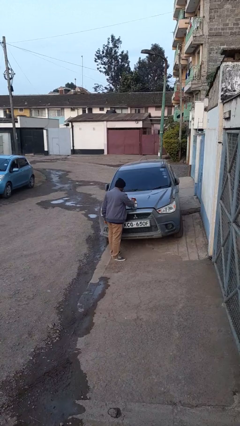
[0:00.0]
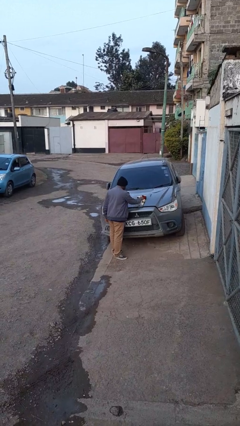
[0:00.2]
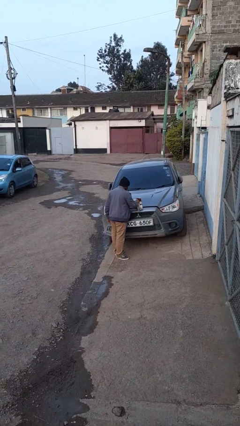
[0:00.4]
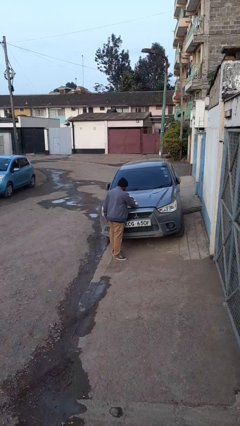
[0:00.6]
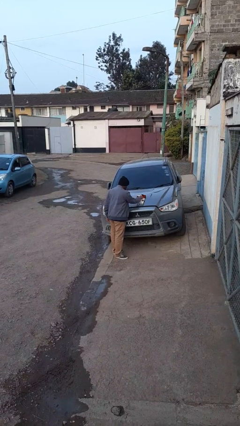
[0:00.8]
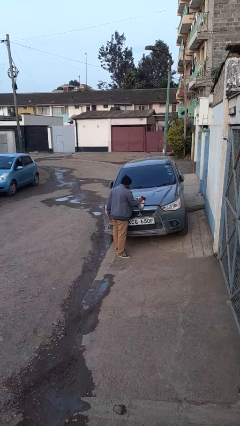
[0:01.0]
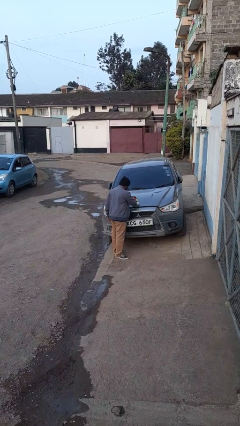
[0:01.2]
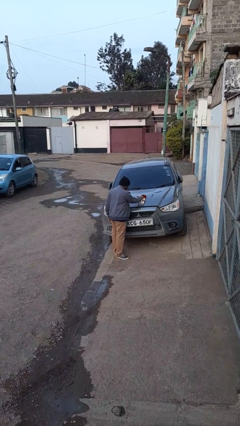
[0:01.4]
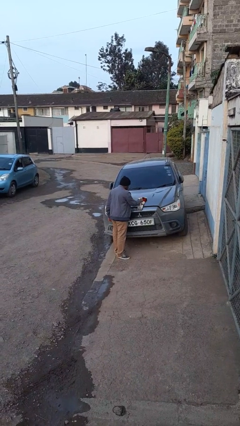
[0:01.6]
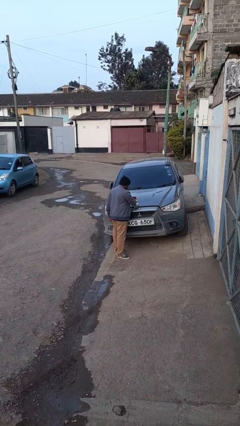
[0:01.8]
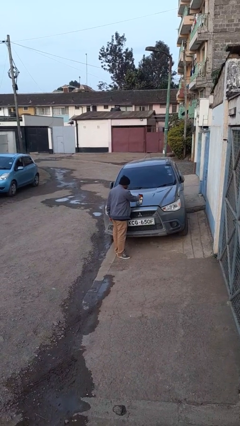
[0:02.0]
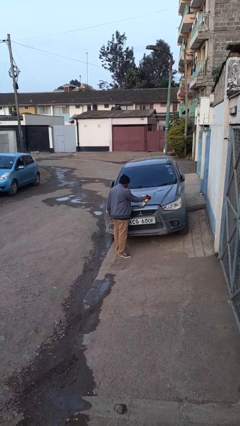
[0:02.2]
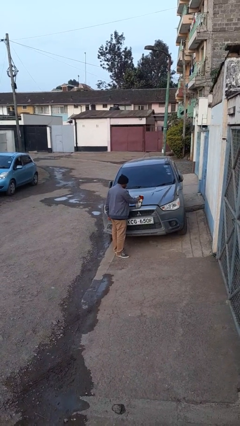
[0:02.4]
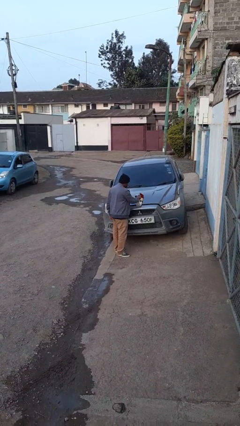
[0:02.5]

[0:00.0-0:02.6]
person polishes car with rag

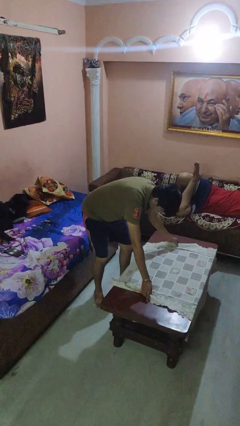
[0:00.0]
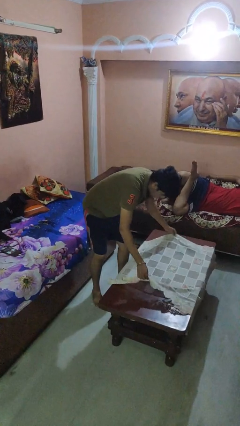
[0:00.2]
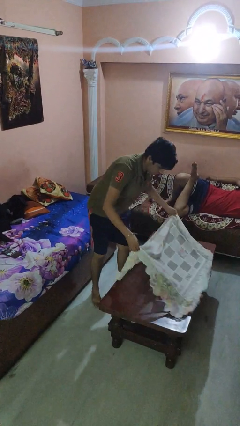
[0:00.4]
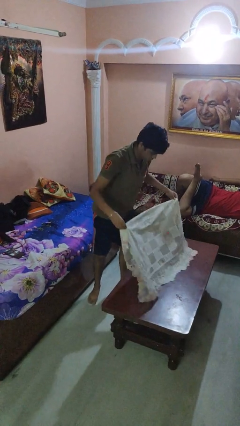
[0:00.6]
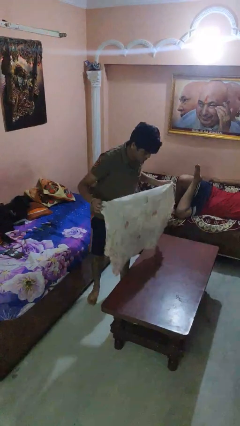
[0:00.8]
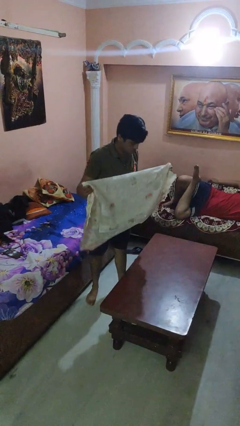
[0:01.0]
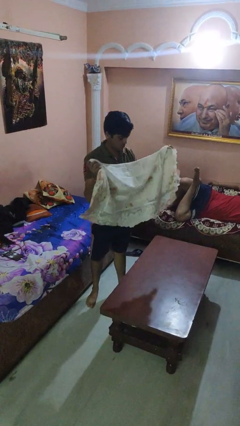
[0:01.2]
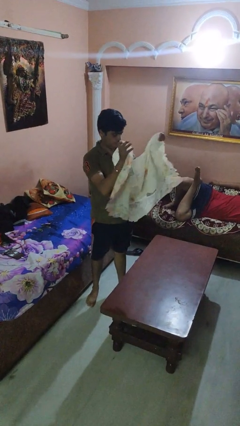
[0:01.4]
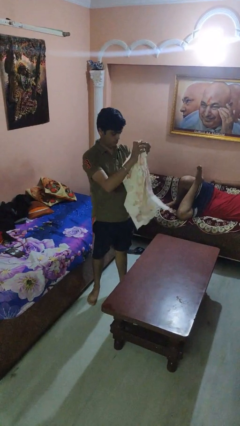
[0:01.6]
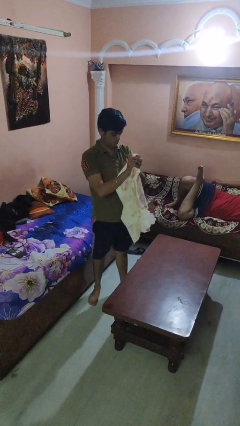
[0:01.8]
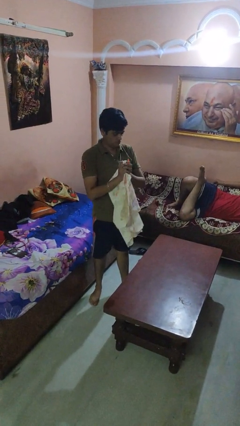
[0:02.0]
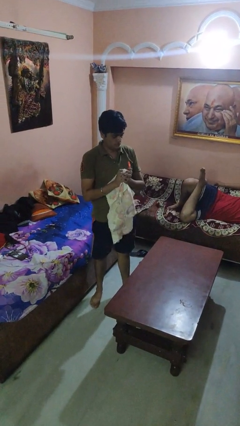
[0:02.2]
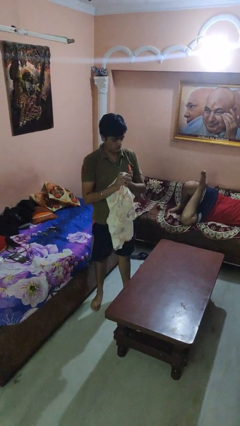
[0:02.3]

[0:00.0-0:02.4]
person folds tablecloth

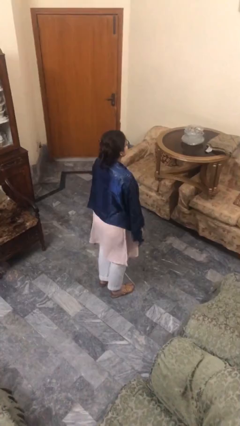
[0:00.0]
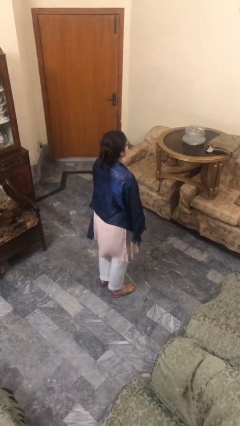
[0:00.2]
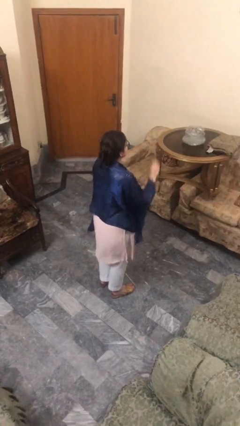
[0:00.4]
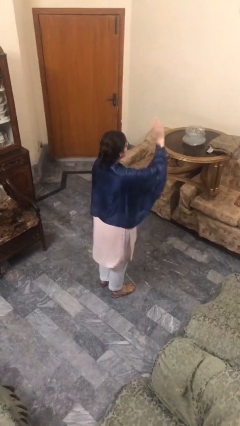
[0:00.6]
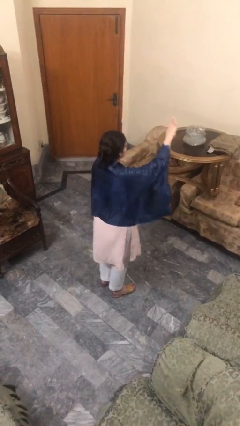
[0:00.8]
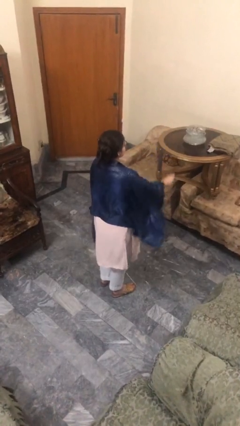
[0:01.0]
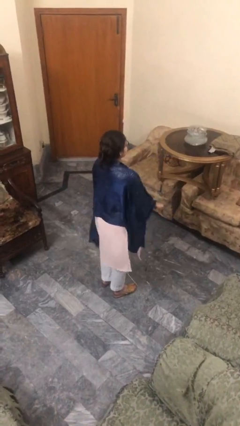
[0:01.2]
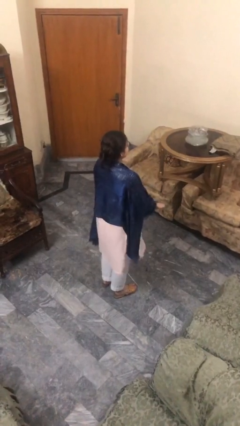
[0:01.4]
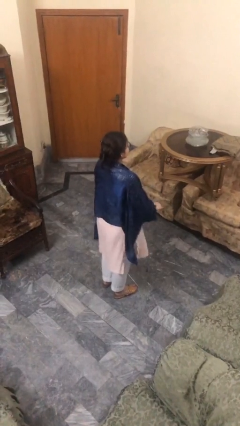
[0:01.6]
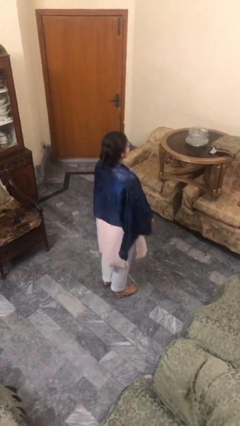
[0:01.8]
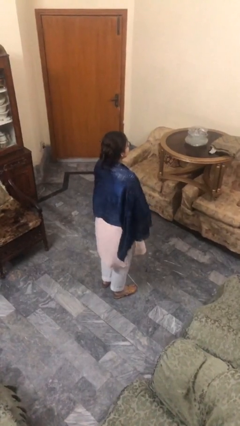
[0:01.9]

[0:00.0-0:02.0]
person gestures swipe down

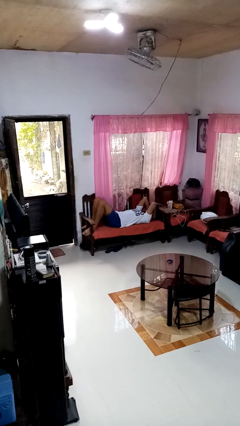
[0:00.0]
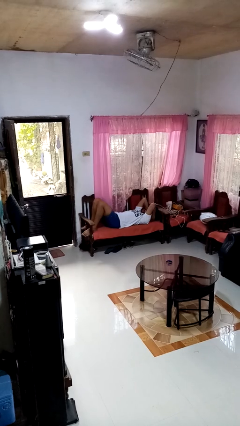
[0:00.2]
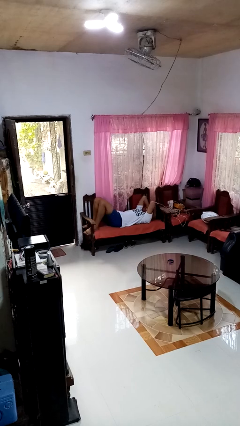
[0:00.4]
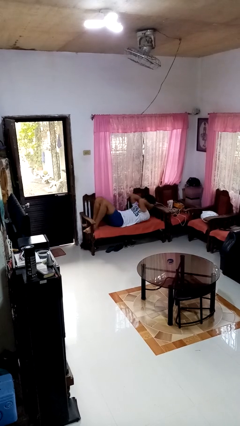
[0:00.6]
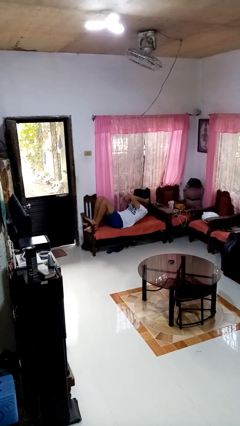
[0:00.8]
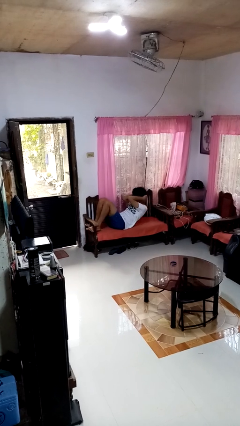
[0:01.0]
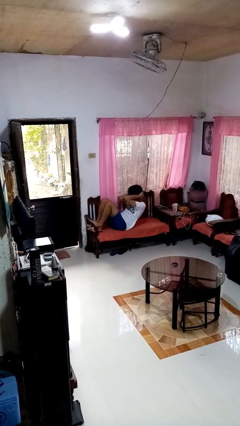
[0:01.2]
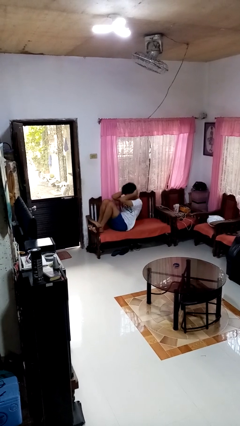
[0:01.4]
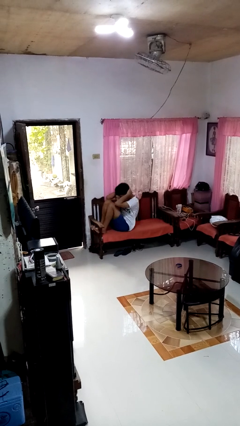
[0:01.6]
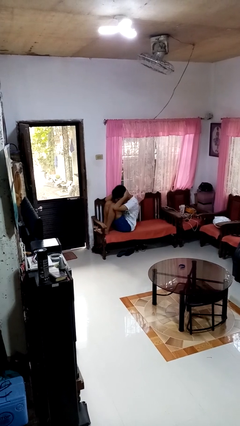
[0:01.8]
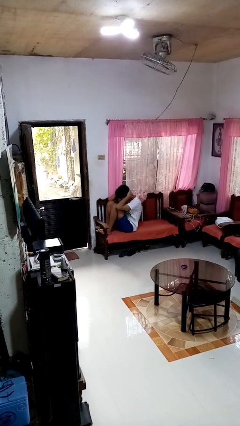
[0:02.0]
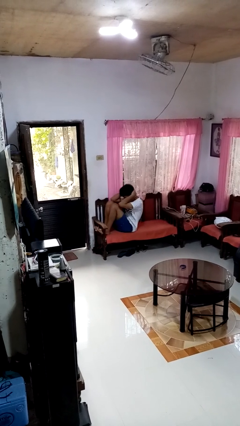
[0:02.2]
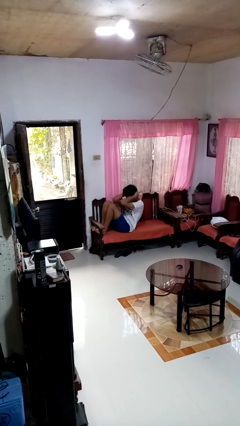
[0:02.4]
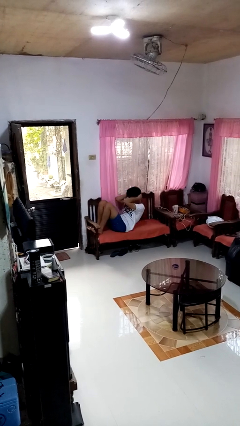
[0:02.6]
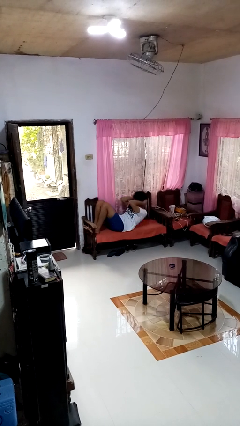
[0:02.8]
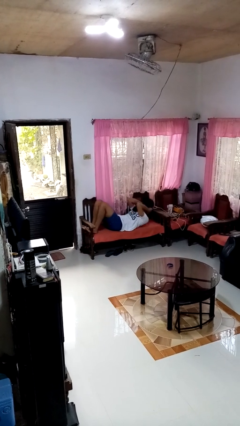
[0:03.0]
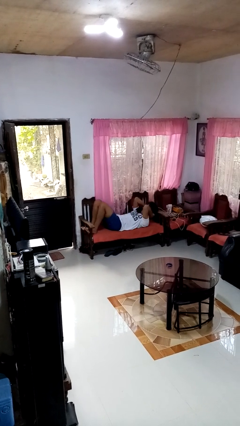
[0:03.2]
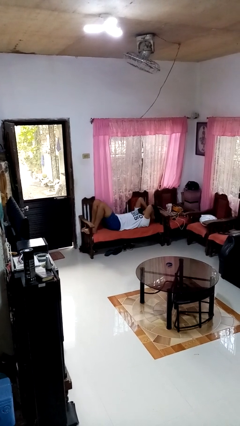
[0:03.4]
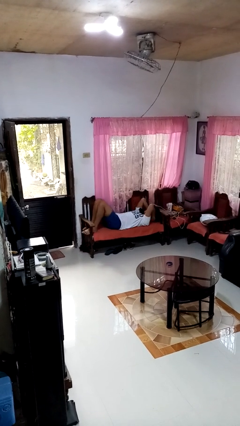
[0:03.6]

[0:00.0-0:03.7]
person exercises with situp

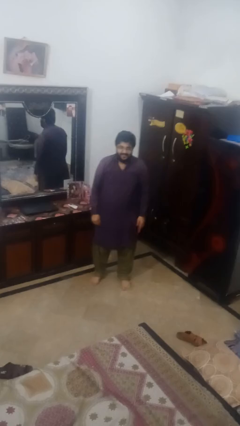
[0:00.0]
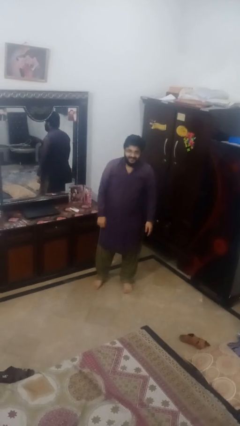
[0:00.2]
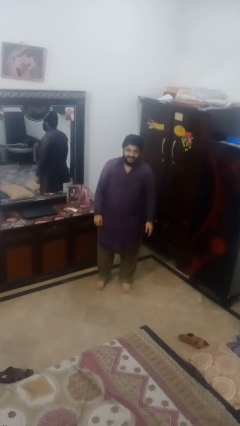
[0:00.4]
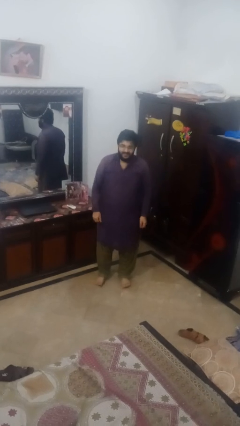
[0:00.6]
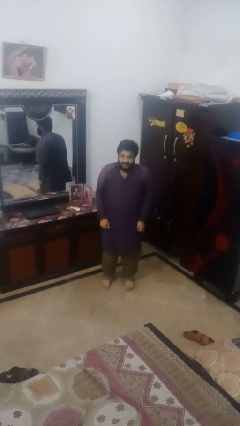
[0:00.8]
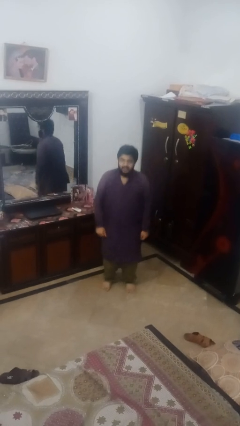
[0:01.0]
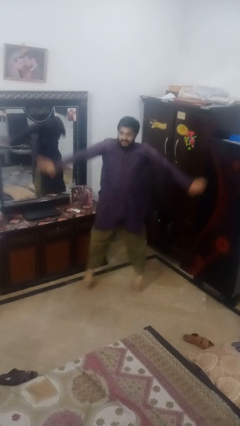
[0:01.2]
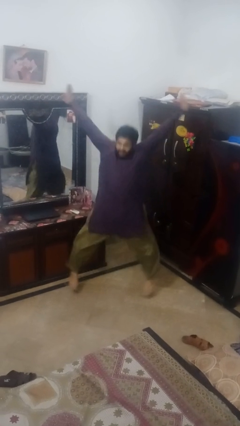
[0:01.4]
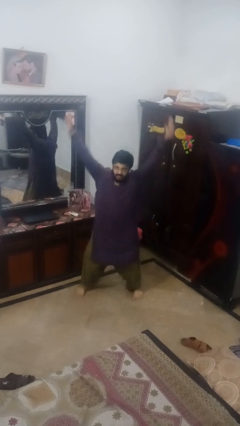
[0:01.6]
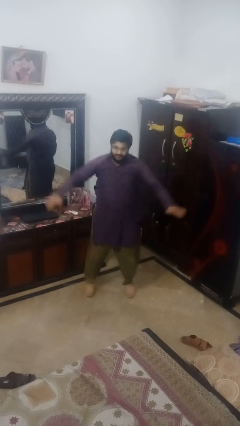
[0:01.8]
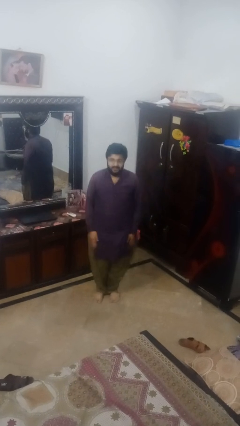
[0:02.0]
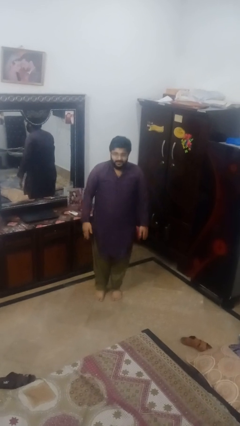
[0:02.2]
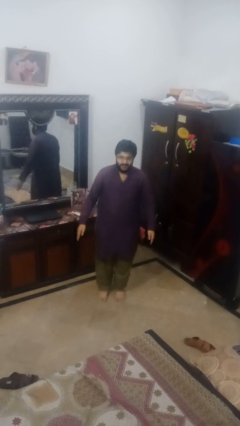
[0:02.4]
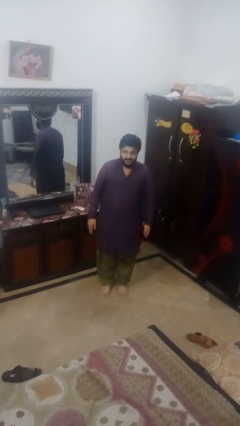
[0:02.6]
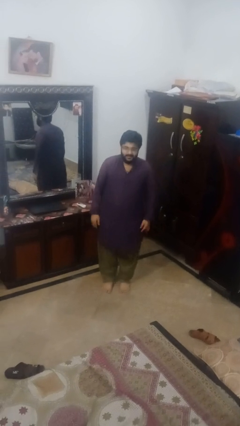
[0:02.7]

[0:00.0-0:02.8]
person exercises with jumping jacks

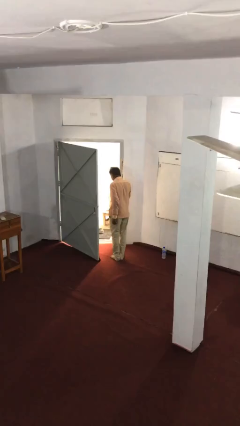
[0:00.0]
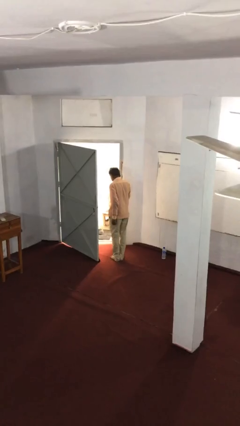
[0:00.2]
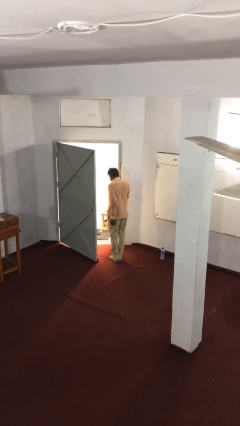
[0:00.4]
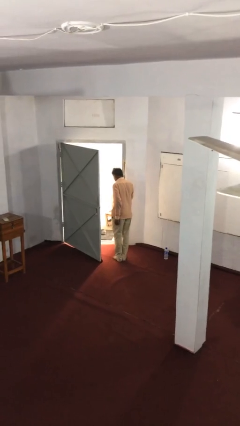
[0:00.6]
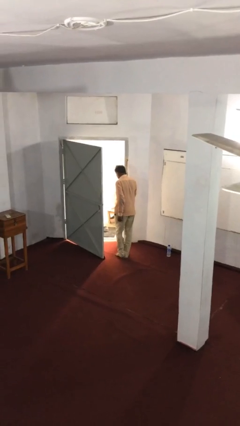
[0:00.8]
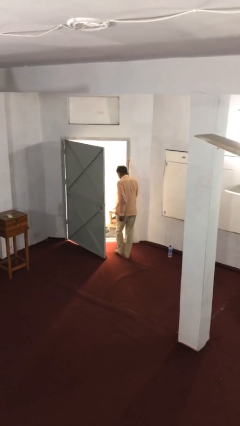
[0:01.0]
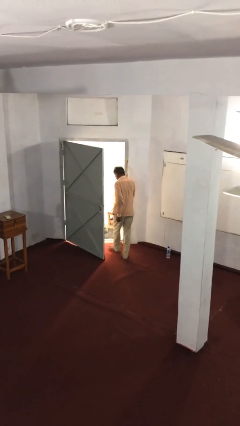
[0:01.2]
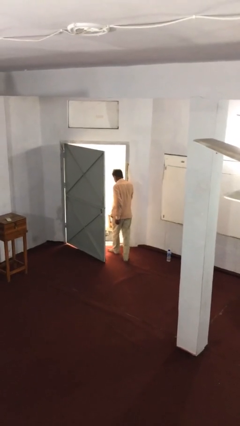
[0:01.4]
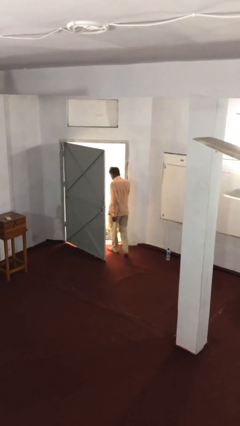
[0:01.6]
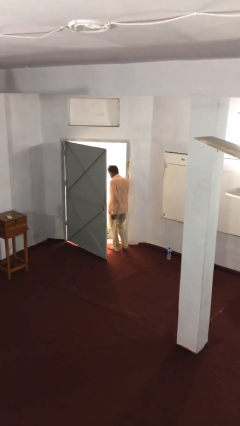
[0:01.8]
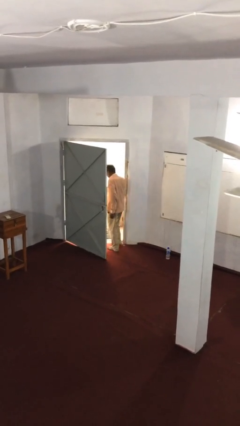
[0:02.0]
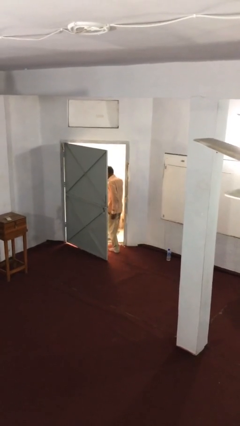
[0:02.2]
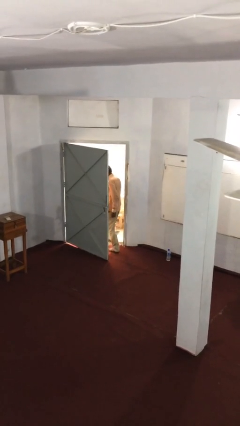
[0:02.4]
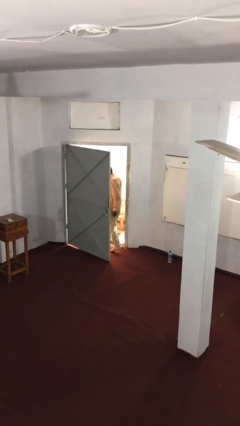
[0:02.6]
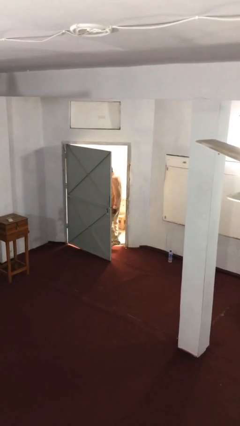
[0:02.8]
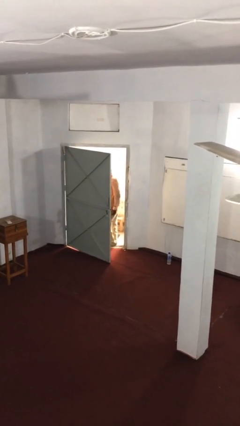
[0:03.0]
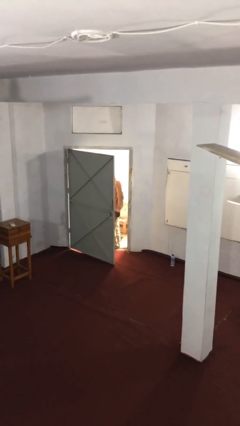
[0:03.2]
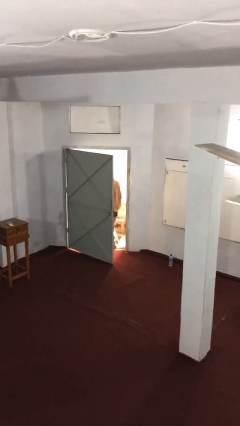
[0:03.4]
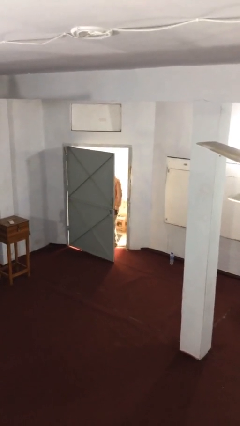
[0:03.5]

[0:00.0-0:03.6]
person exits scene through structure

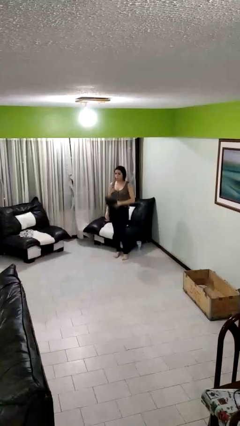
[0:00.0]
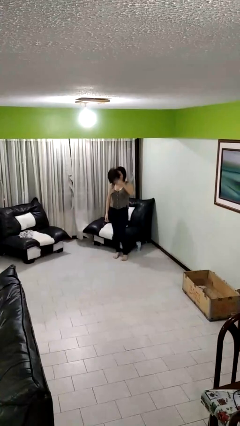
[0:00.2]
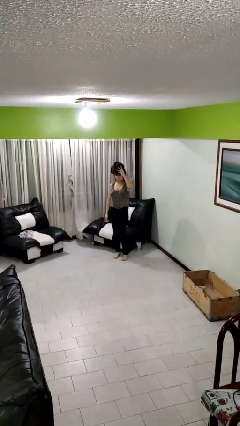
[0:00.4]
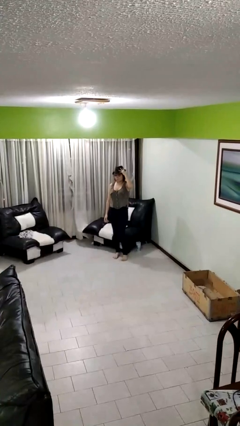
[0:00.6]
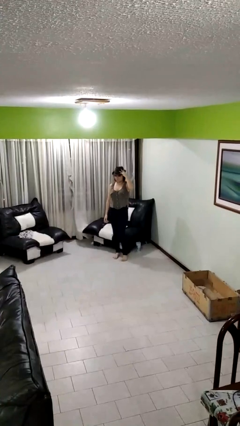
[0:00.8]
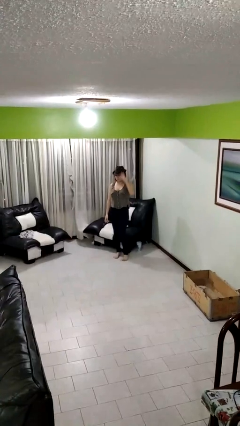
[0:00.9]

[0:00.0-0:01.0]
person puts on hat
